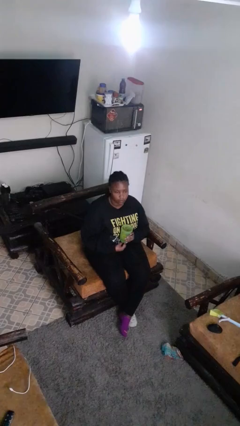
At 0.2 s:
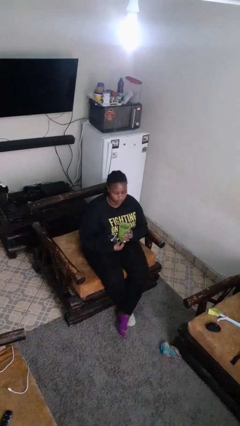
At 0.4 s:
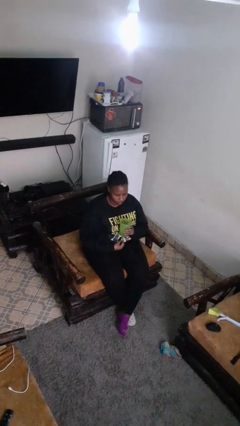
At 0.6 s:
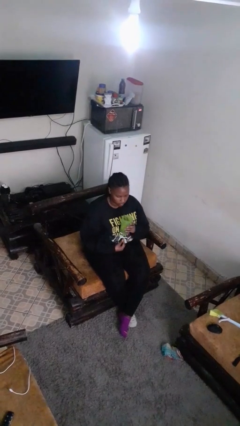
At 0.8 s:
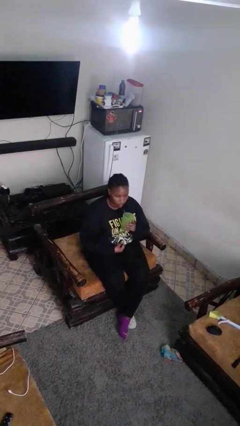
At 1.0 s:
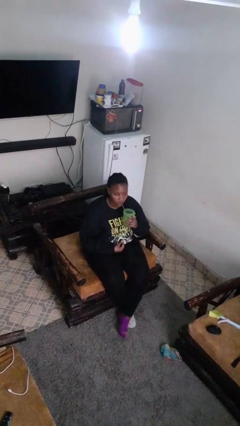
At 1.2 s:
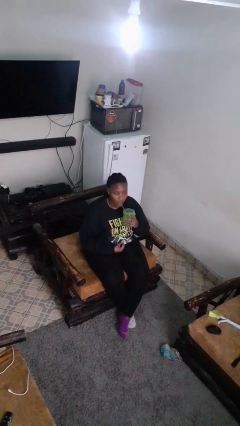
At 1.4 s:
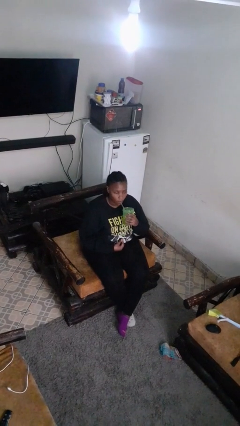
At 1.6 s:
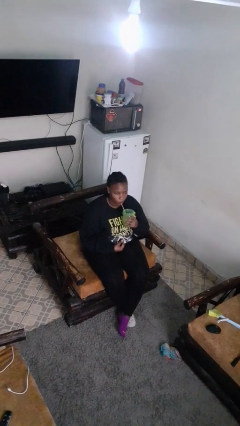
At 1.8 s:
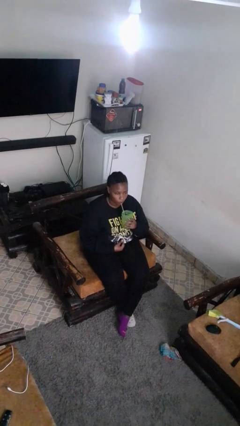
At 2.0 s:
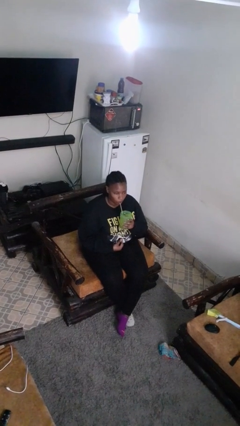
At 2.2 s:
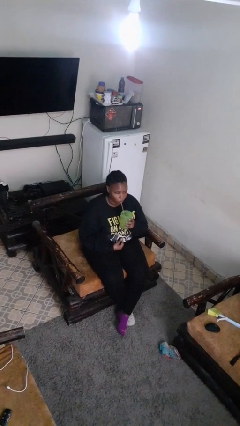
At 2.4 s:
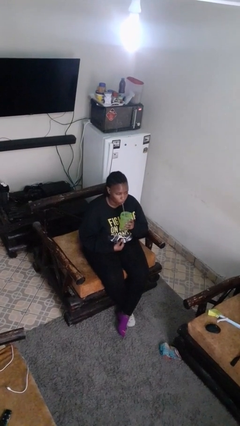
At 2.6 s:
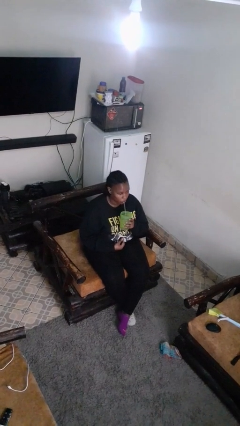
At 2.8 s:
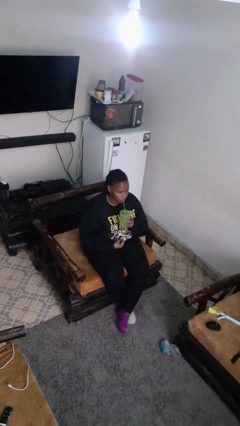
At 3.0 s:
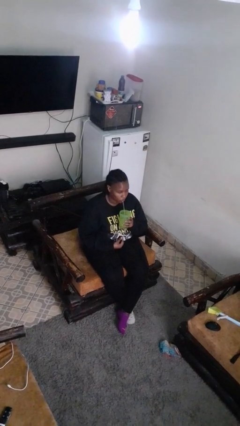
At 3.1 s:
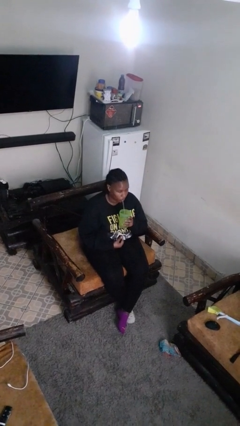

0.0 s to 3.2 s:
person drinks from straw

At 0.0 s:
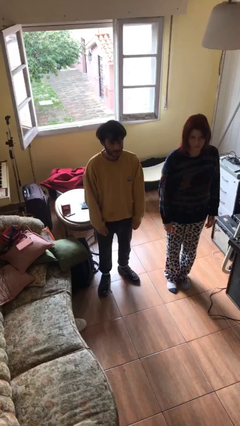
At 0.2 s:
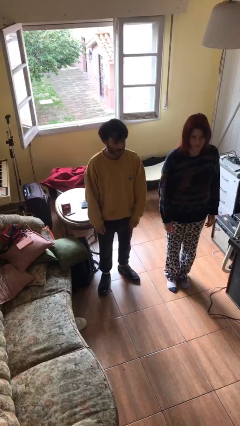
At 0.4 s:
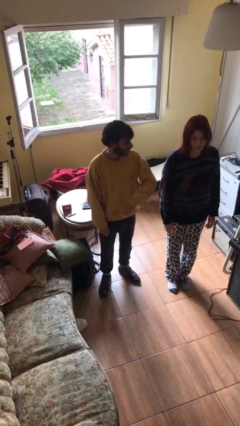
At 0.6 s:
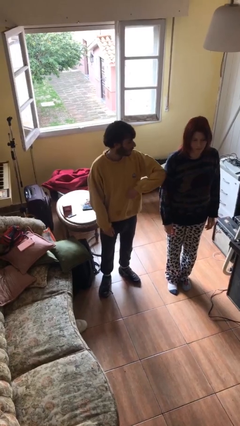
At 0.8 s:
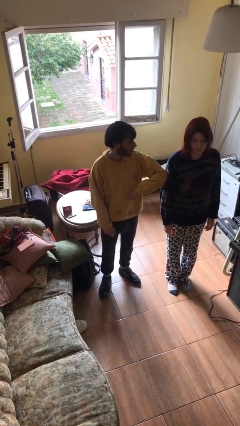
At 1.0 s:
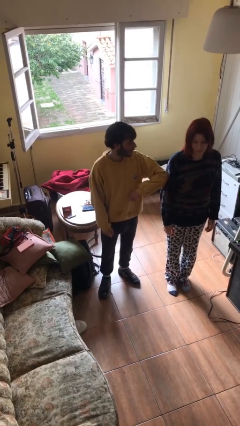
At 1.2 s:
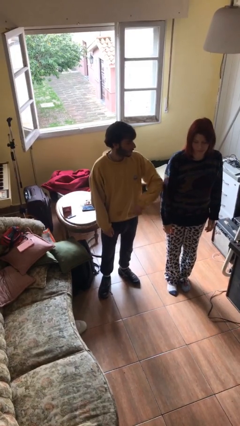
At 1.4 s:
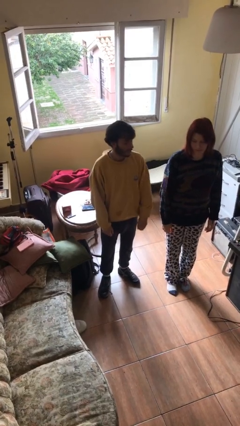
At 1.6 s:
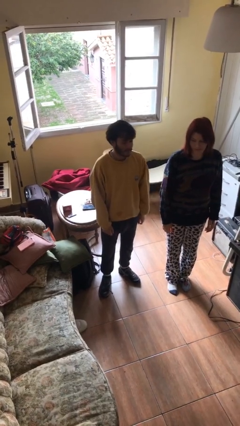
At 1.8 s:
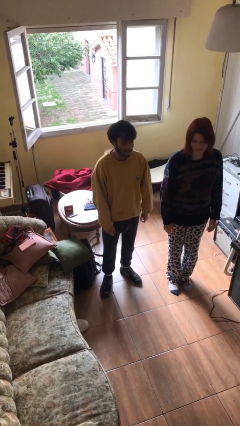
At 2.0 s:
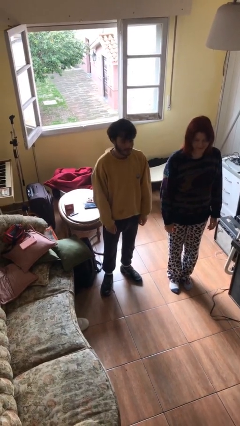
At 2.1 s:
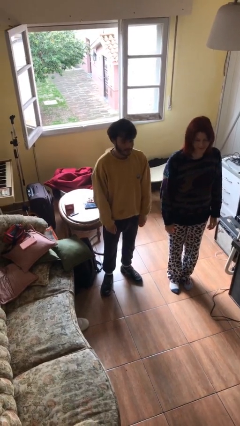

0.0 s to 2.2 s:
person nudges person with elbow

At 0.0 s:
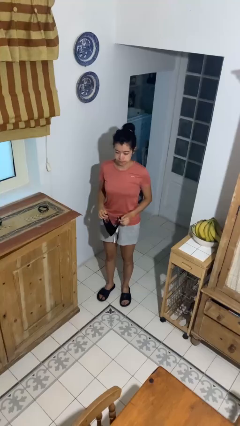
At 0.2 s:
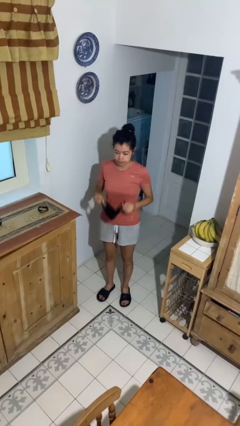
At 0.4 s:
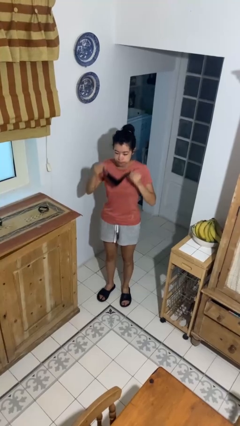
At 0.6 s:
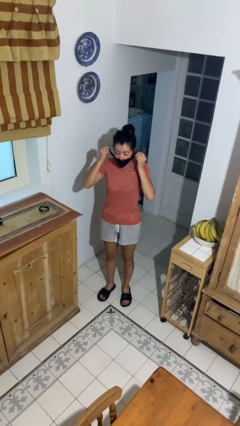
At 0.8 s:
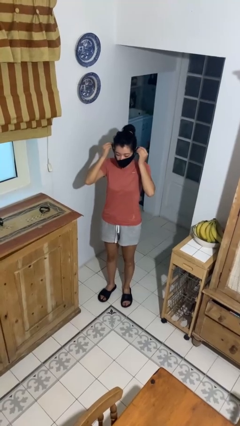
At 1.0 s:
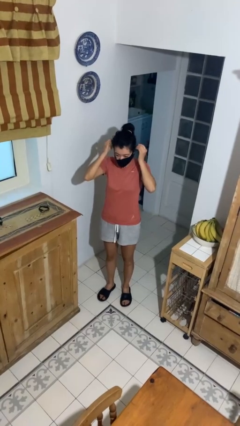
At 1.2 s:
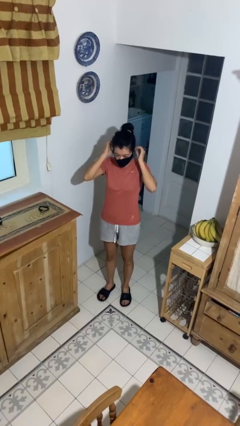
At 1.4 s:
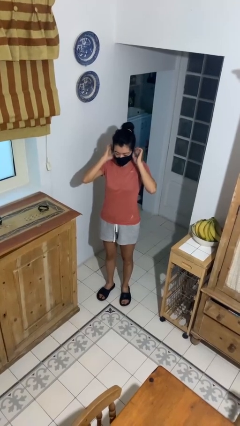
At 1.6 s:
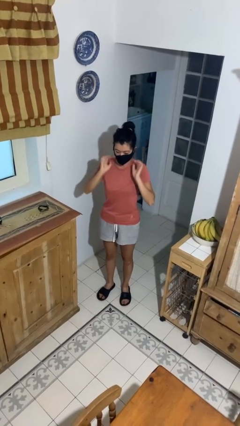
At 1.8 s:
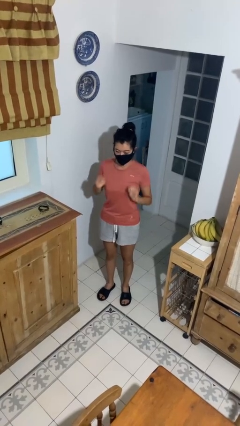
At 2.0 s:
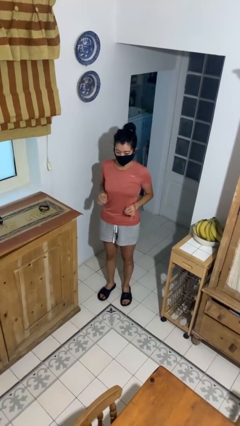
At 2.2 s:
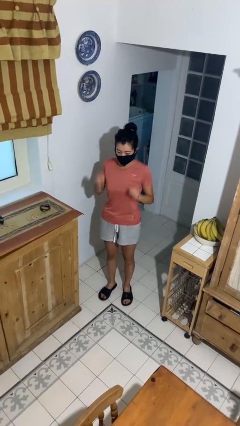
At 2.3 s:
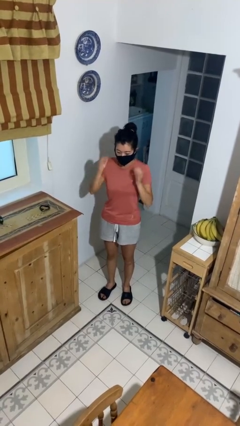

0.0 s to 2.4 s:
person puts on facemask

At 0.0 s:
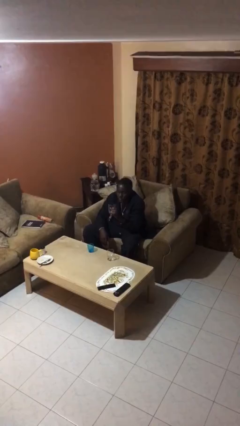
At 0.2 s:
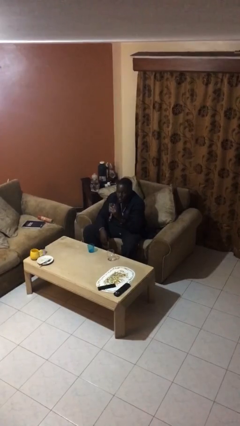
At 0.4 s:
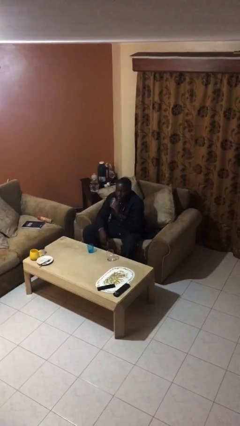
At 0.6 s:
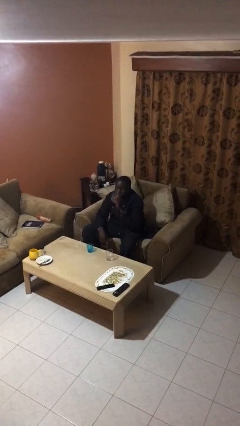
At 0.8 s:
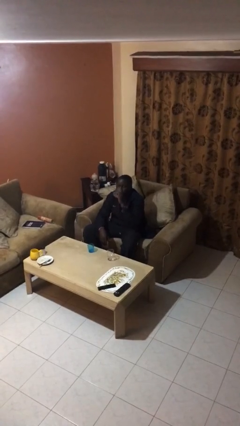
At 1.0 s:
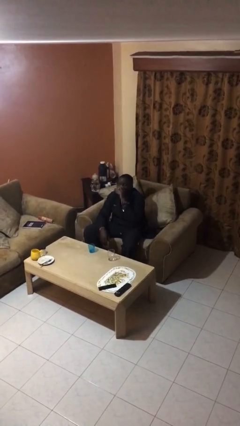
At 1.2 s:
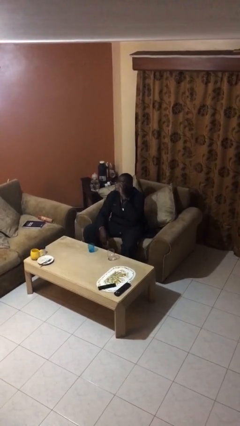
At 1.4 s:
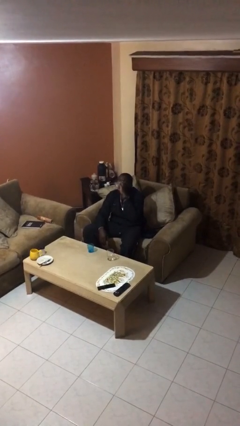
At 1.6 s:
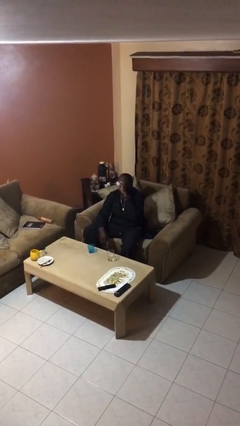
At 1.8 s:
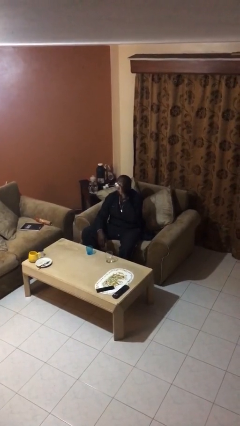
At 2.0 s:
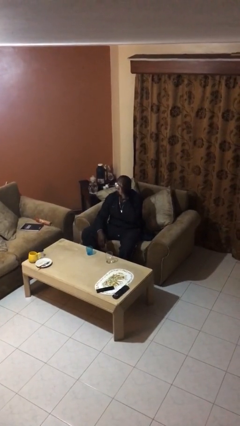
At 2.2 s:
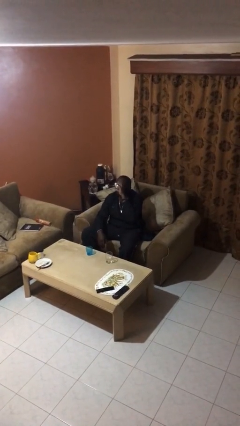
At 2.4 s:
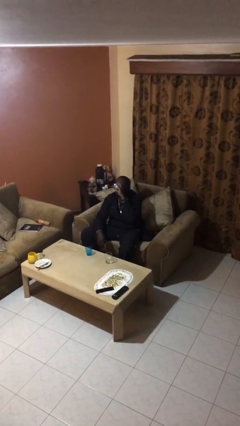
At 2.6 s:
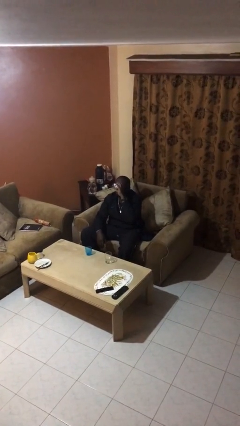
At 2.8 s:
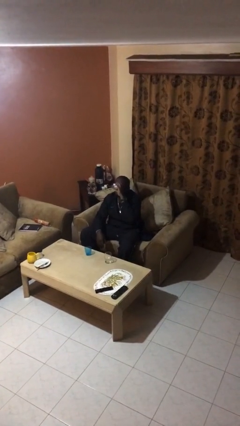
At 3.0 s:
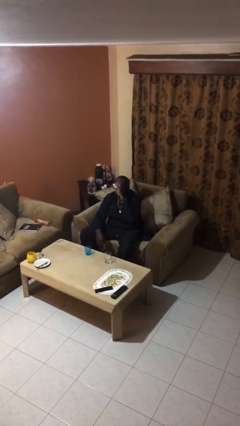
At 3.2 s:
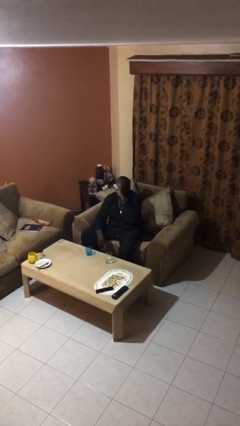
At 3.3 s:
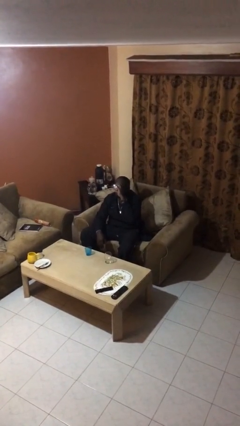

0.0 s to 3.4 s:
person drinks from shotglass

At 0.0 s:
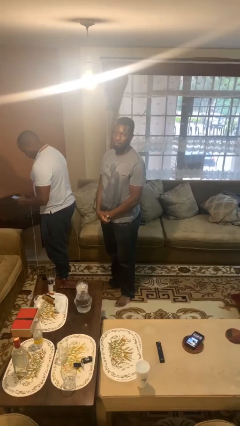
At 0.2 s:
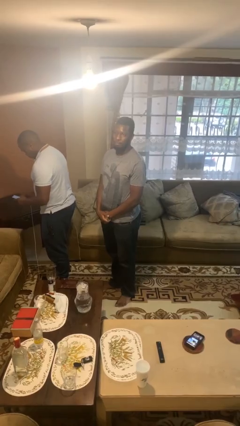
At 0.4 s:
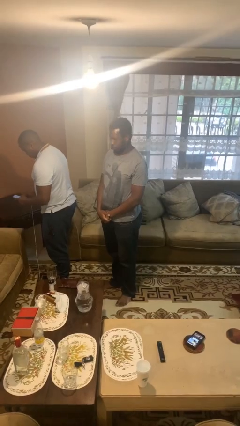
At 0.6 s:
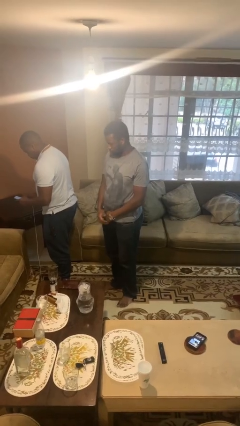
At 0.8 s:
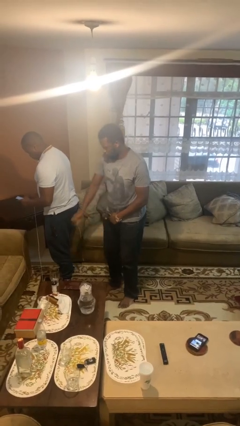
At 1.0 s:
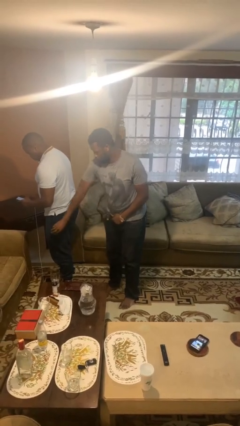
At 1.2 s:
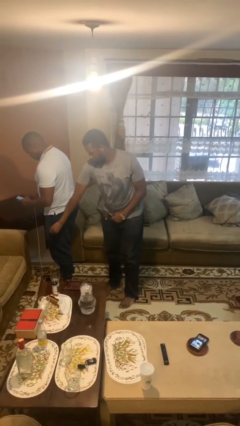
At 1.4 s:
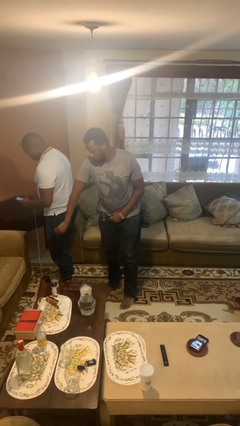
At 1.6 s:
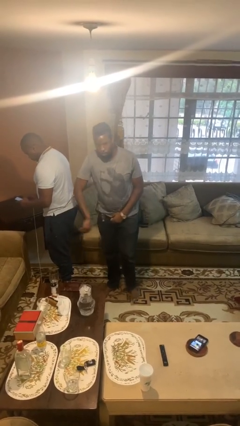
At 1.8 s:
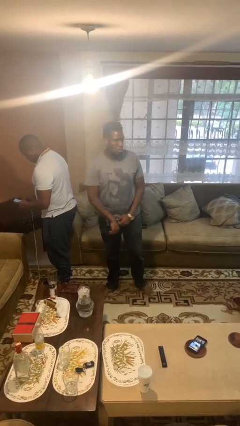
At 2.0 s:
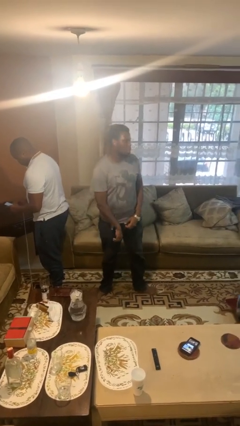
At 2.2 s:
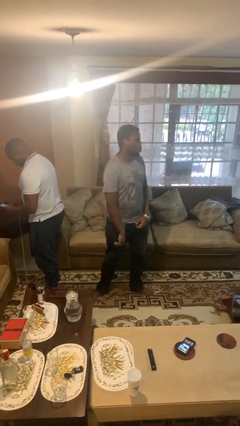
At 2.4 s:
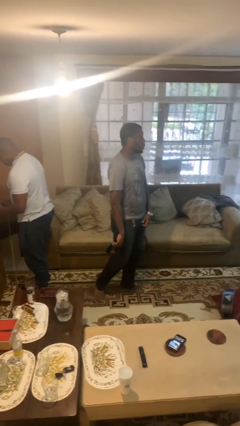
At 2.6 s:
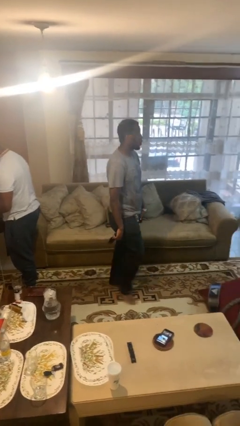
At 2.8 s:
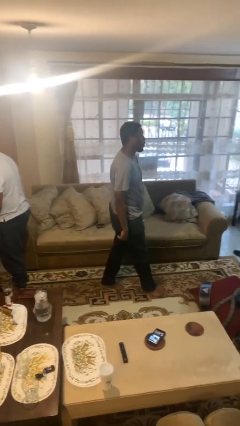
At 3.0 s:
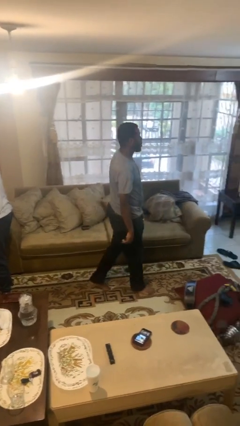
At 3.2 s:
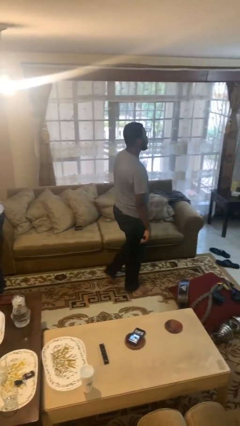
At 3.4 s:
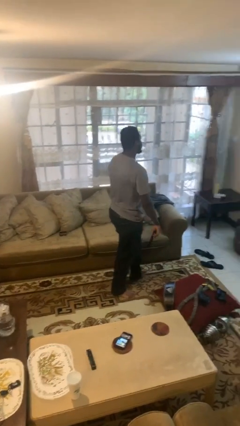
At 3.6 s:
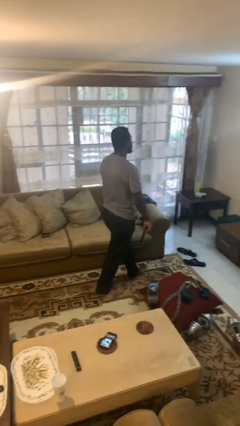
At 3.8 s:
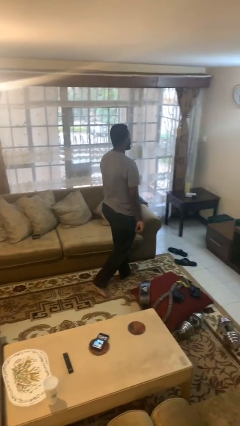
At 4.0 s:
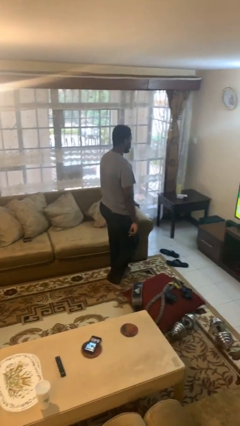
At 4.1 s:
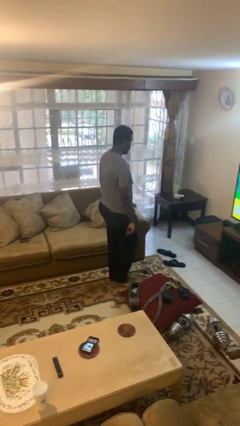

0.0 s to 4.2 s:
person steals object from person

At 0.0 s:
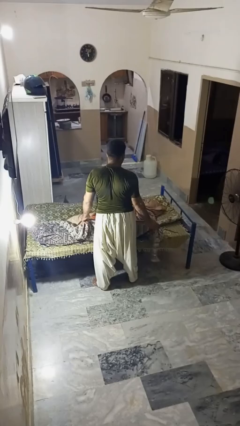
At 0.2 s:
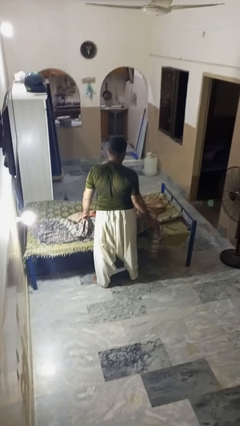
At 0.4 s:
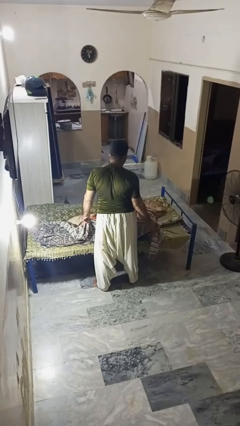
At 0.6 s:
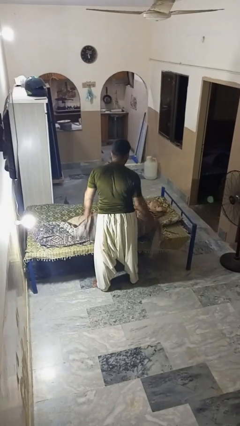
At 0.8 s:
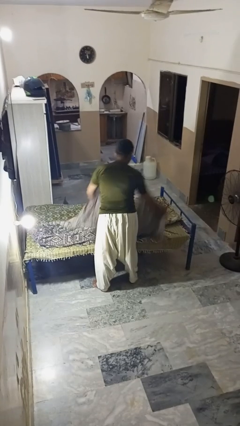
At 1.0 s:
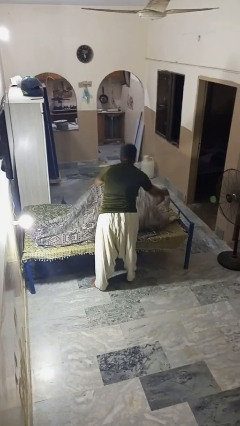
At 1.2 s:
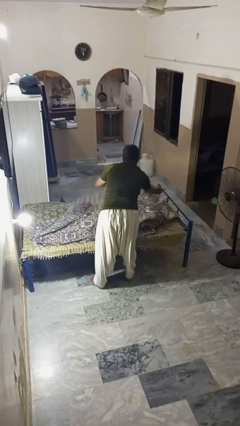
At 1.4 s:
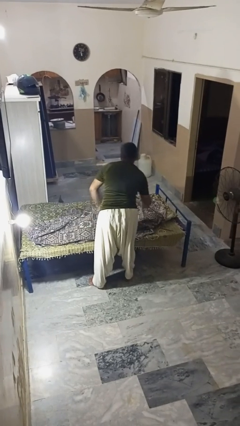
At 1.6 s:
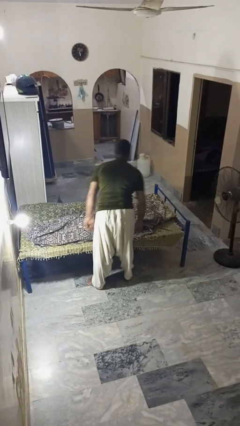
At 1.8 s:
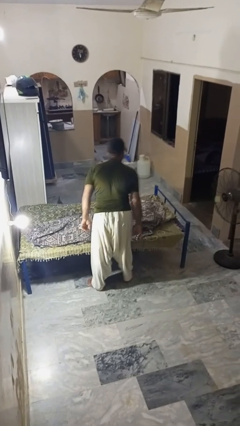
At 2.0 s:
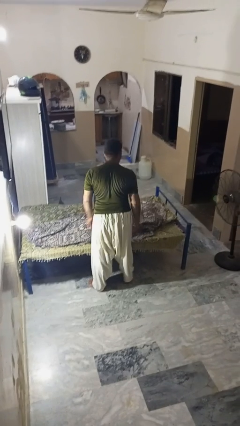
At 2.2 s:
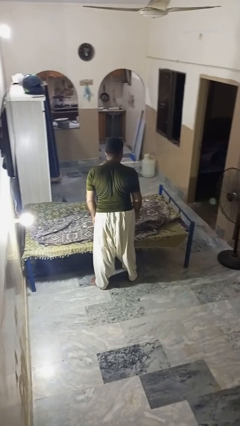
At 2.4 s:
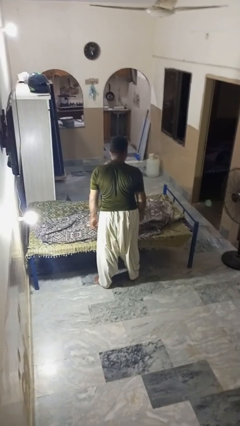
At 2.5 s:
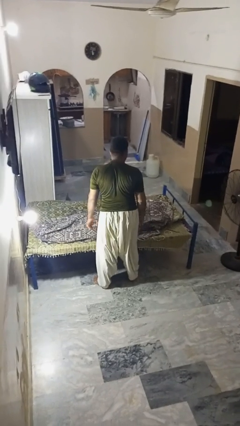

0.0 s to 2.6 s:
person covers friend with blanket
